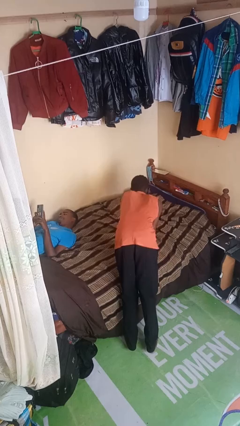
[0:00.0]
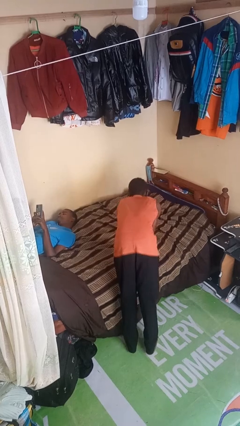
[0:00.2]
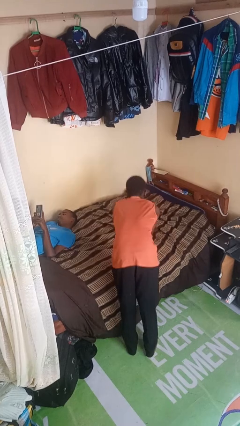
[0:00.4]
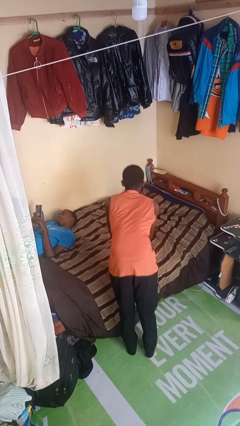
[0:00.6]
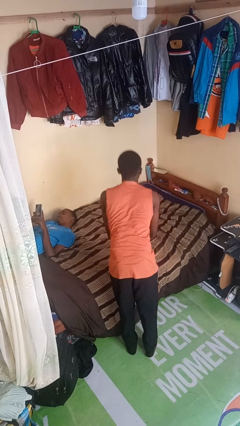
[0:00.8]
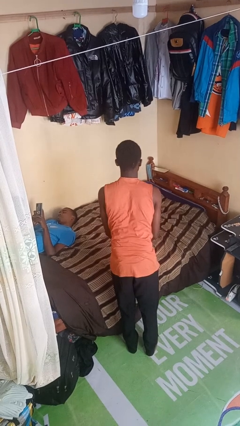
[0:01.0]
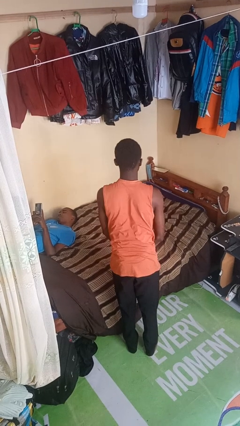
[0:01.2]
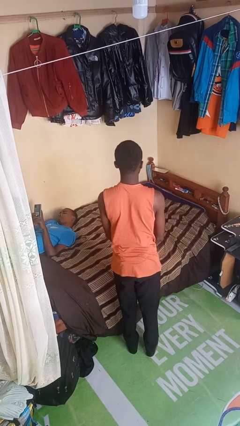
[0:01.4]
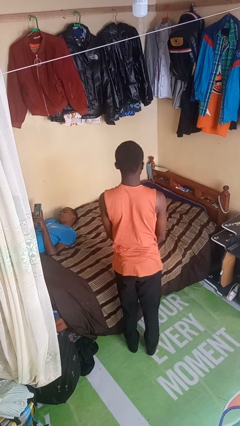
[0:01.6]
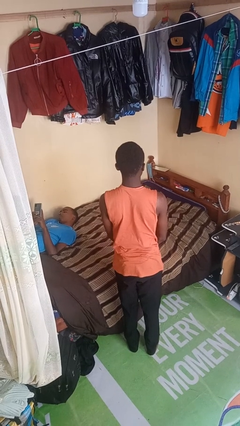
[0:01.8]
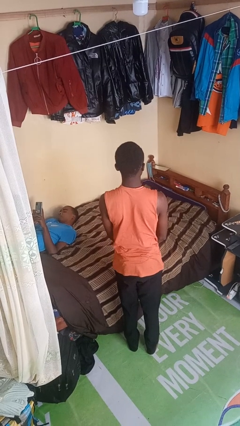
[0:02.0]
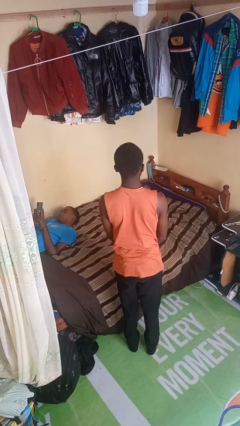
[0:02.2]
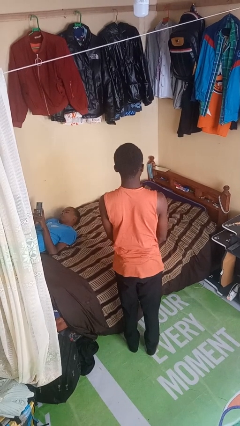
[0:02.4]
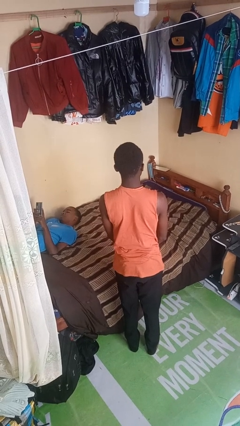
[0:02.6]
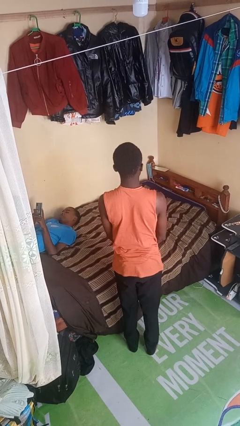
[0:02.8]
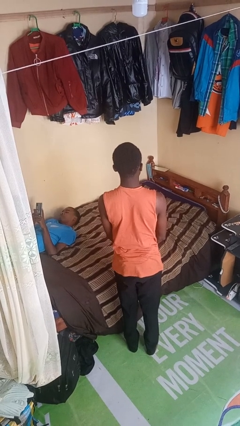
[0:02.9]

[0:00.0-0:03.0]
person stands up

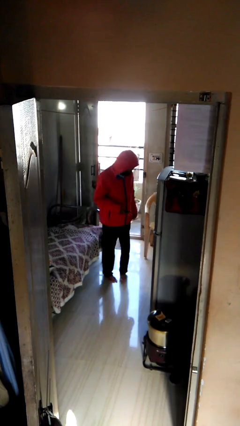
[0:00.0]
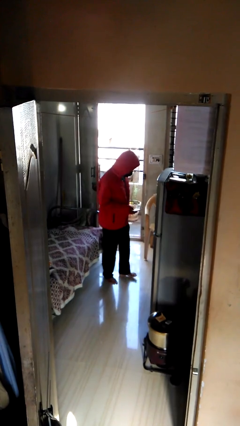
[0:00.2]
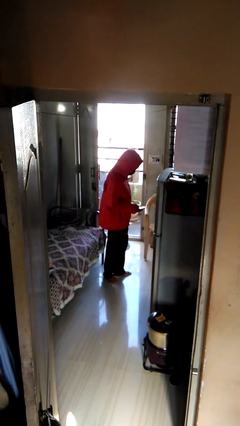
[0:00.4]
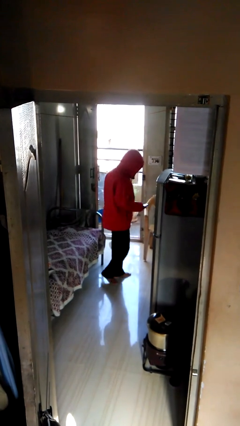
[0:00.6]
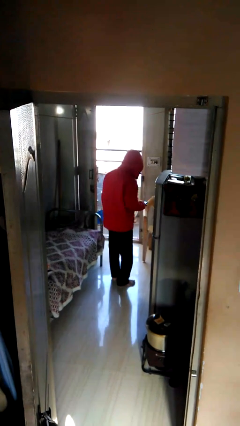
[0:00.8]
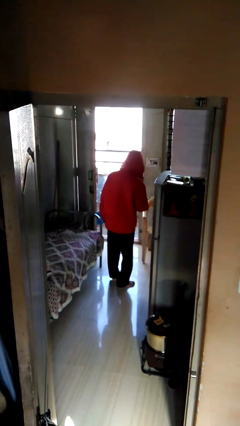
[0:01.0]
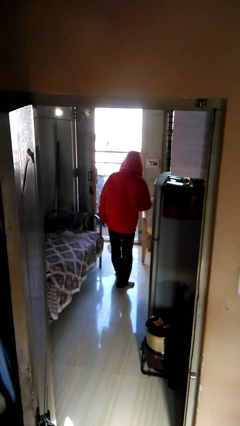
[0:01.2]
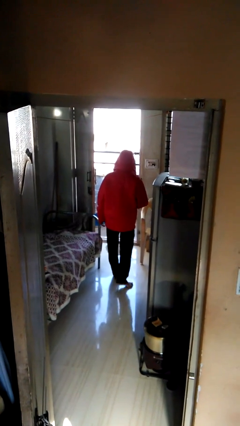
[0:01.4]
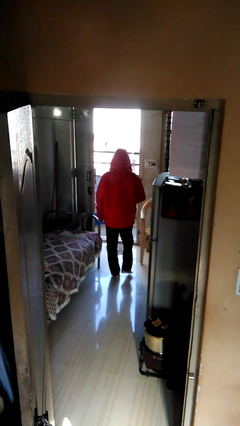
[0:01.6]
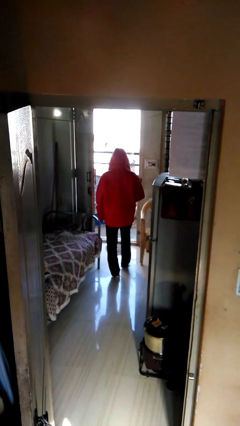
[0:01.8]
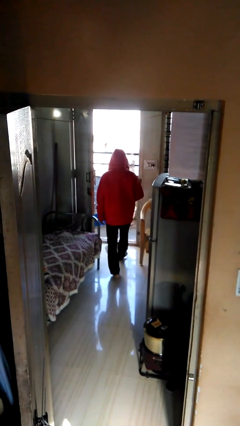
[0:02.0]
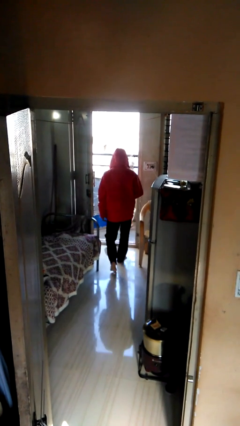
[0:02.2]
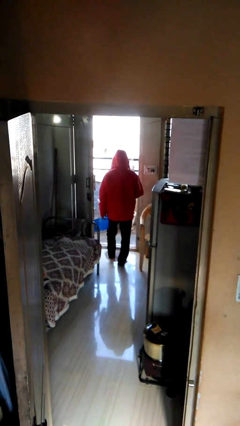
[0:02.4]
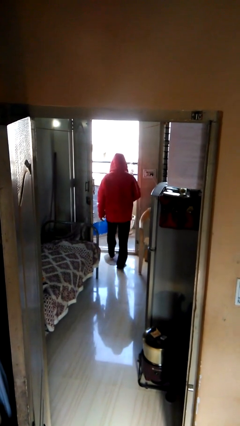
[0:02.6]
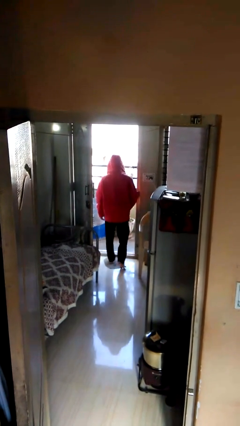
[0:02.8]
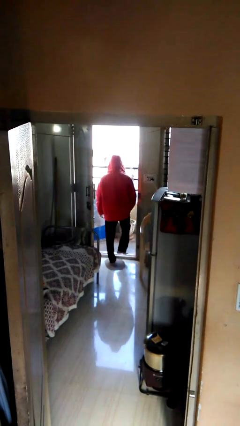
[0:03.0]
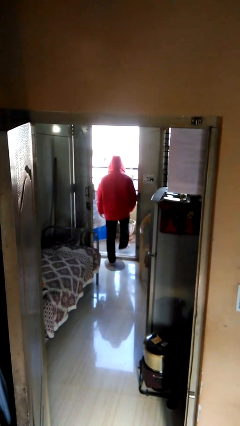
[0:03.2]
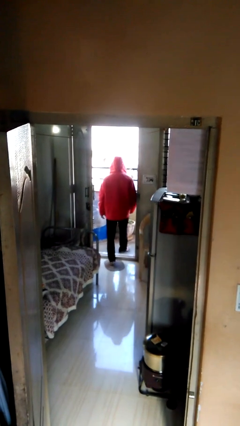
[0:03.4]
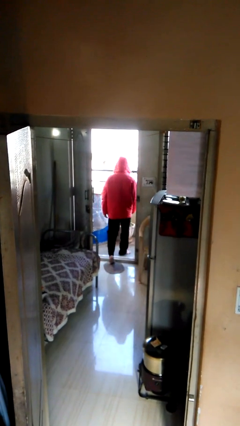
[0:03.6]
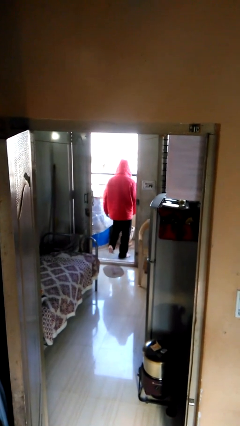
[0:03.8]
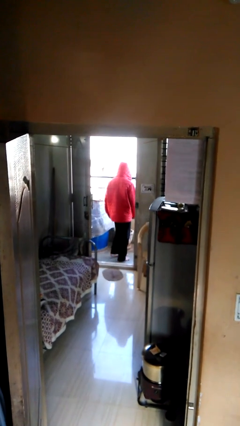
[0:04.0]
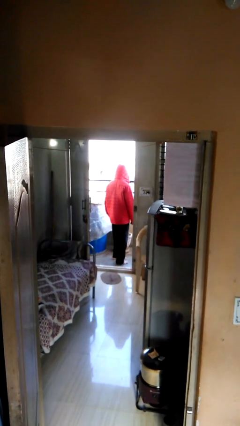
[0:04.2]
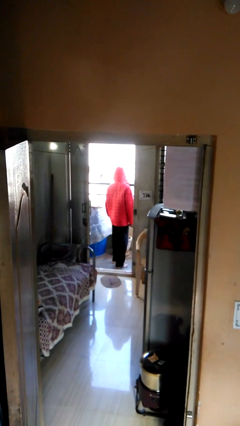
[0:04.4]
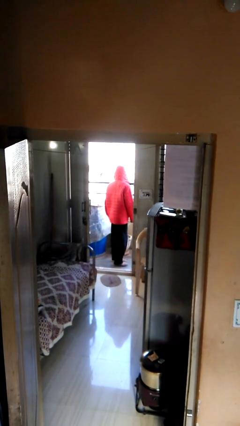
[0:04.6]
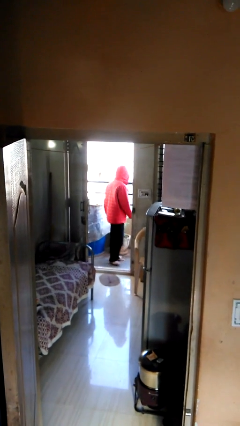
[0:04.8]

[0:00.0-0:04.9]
person exits scene through structure

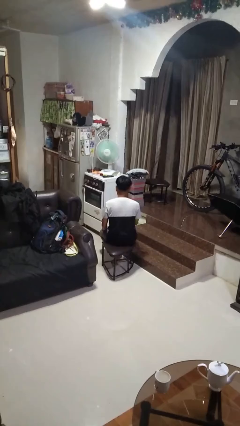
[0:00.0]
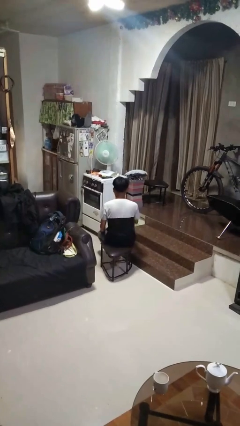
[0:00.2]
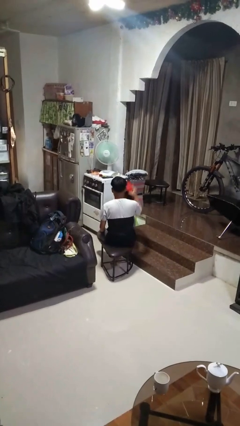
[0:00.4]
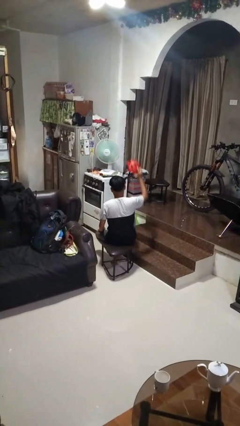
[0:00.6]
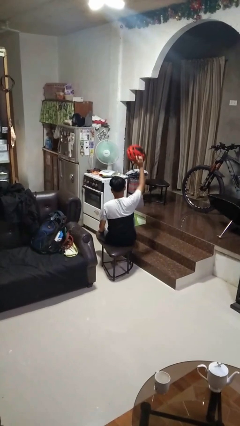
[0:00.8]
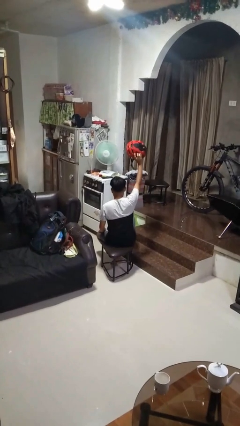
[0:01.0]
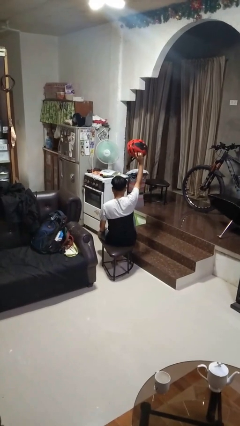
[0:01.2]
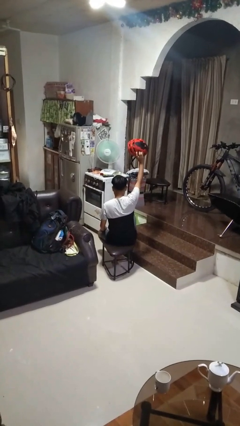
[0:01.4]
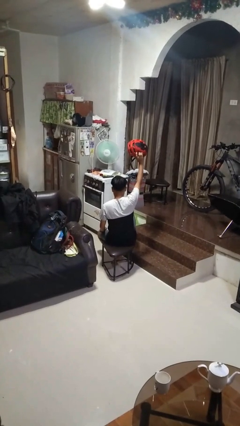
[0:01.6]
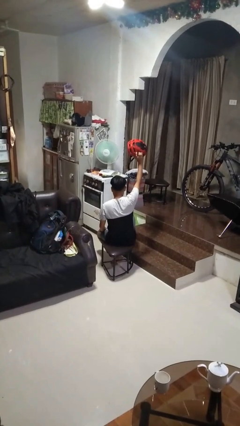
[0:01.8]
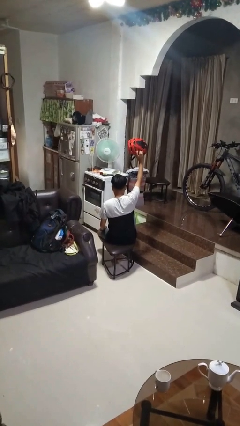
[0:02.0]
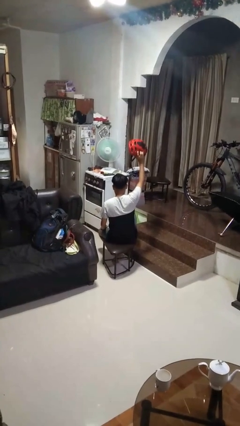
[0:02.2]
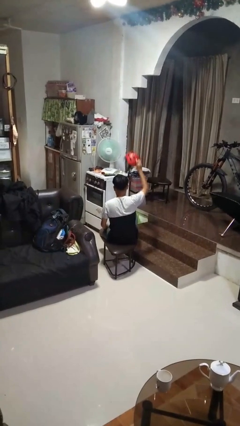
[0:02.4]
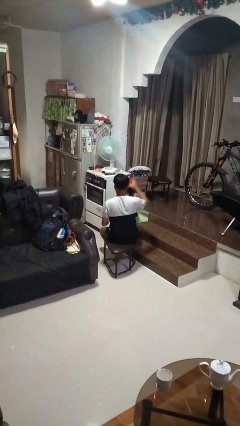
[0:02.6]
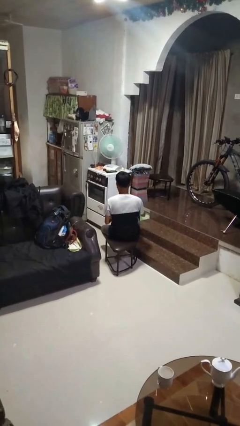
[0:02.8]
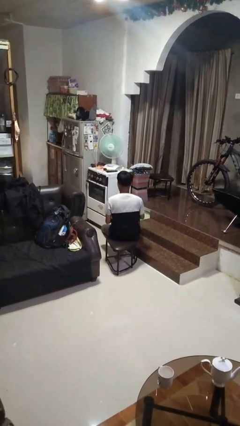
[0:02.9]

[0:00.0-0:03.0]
person holds object above head

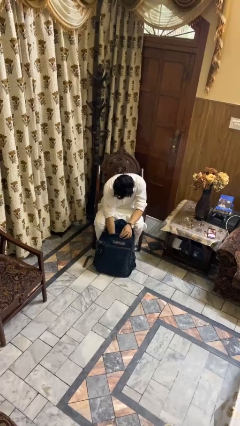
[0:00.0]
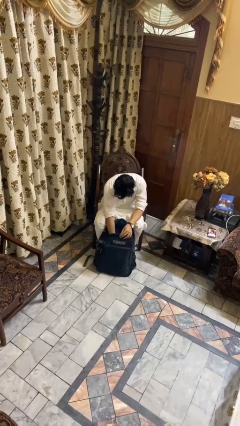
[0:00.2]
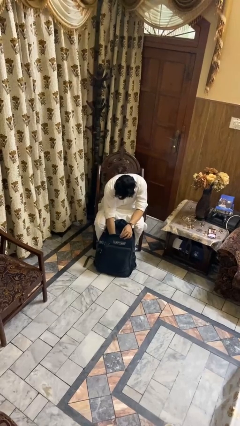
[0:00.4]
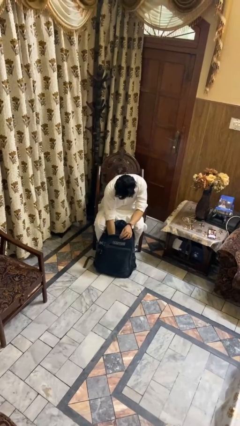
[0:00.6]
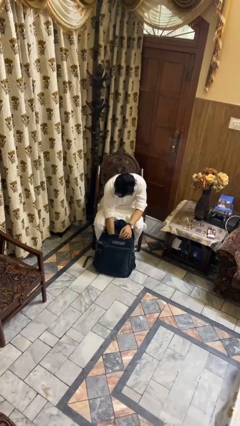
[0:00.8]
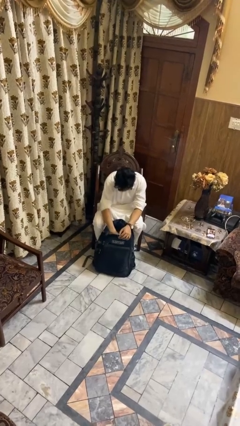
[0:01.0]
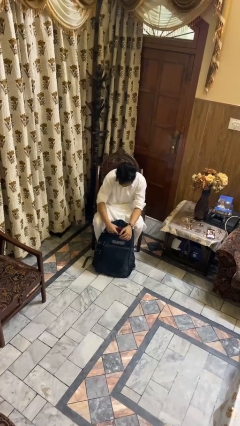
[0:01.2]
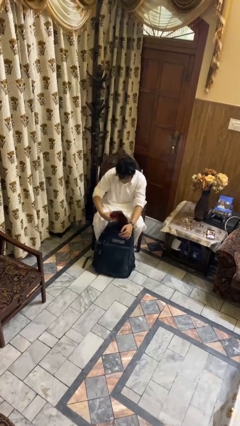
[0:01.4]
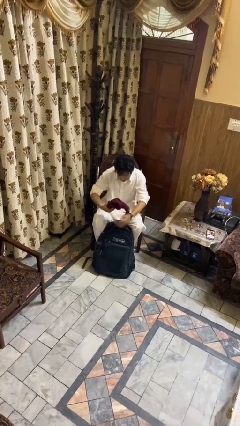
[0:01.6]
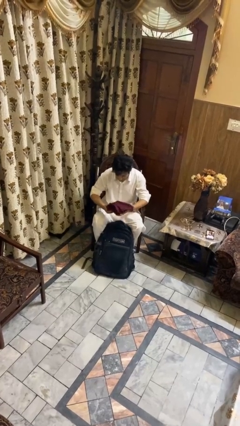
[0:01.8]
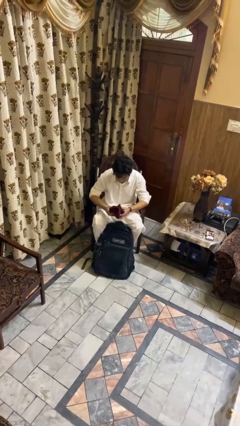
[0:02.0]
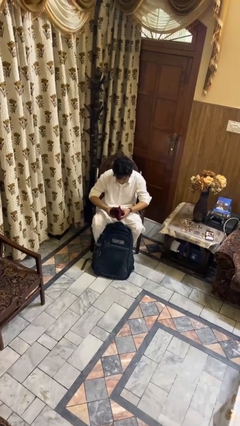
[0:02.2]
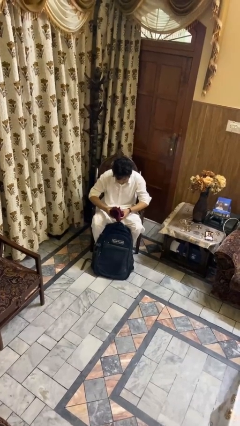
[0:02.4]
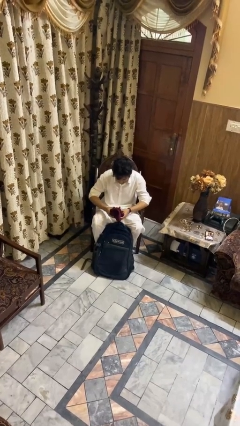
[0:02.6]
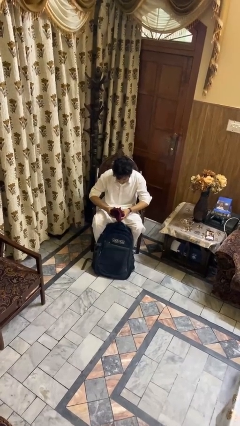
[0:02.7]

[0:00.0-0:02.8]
person takes object from backpack

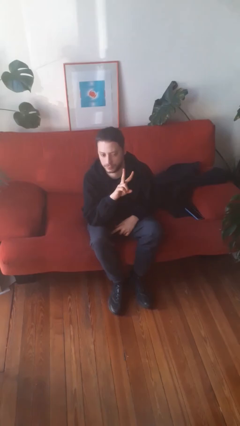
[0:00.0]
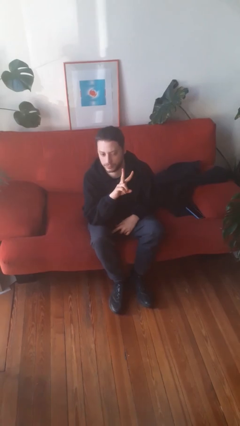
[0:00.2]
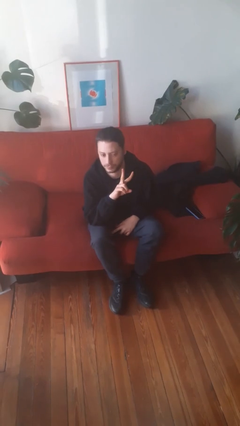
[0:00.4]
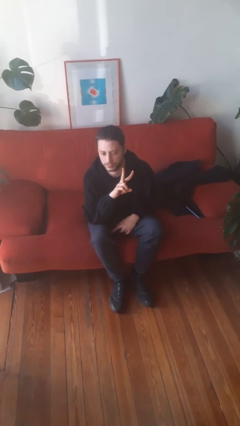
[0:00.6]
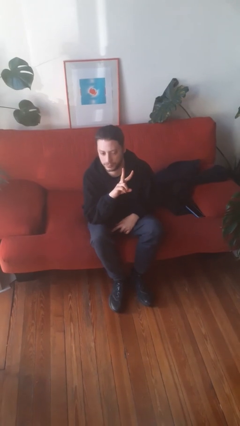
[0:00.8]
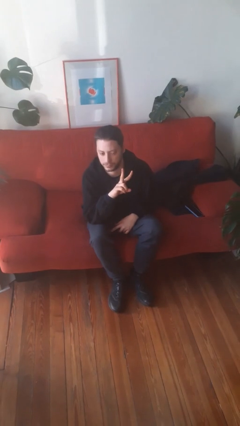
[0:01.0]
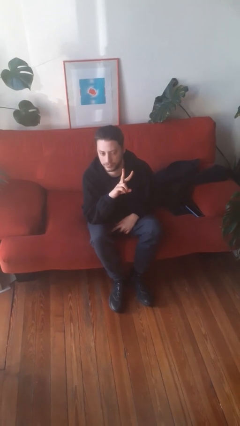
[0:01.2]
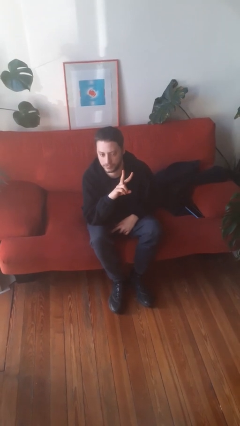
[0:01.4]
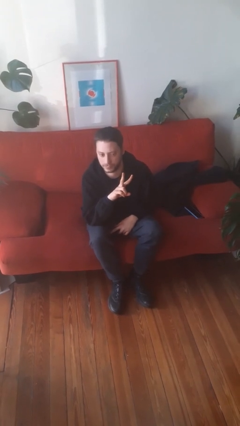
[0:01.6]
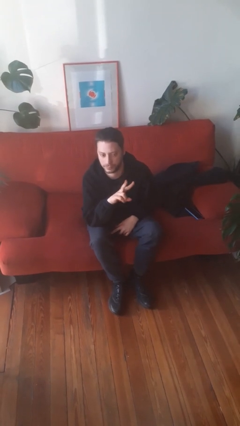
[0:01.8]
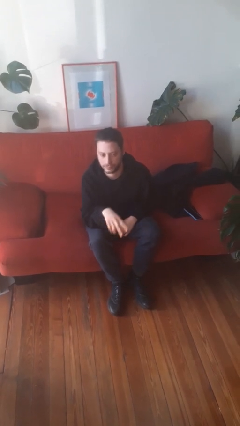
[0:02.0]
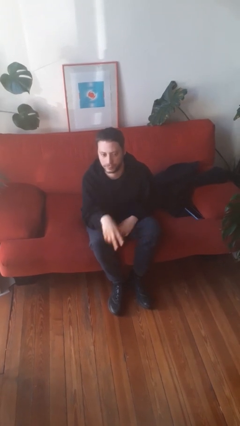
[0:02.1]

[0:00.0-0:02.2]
person gestures peace

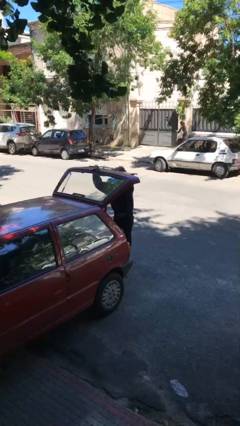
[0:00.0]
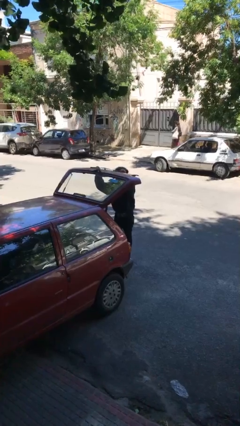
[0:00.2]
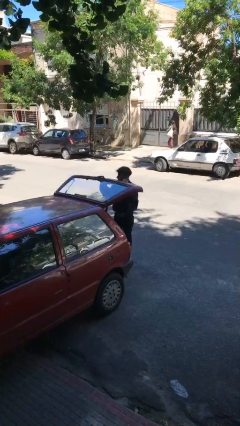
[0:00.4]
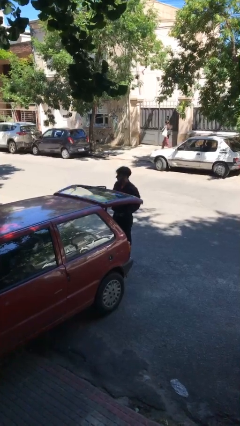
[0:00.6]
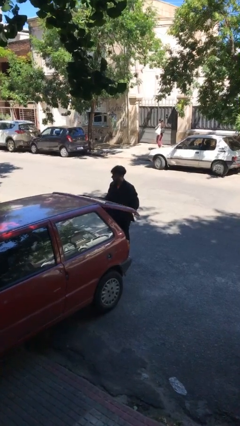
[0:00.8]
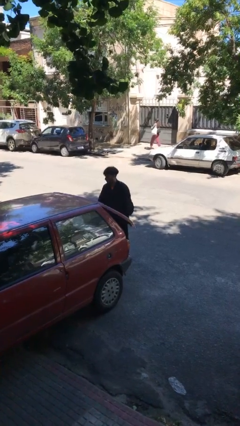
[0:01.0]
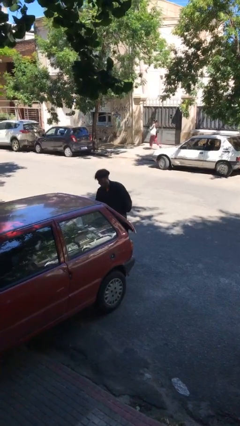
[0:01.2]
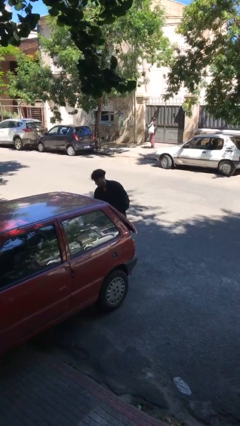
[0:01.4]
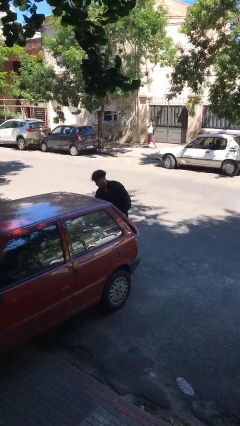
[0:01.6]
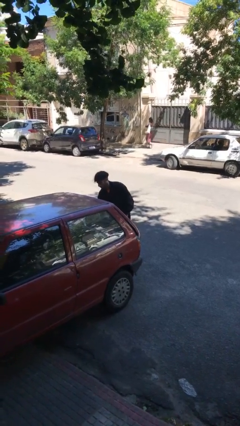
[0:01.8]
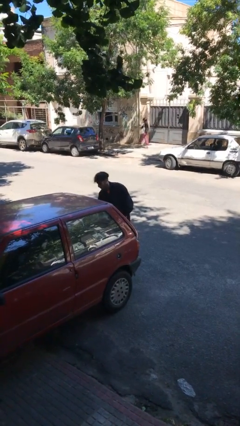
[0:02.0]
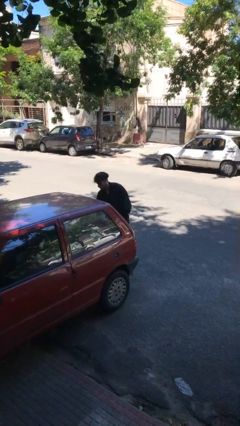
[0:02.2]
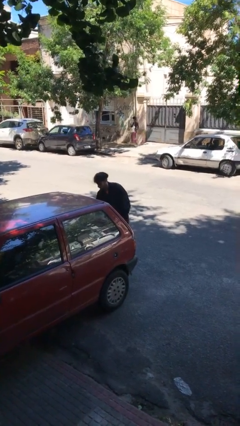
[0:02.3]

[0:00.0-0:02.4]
person closes car trunk
